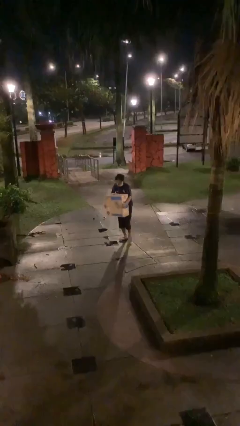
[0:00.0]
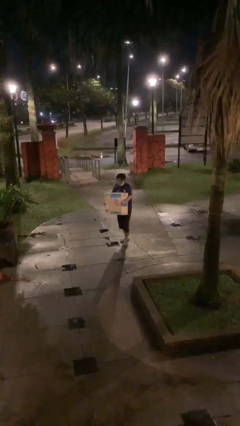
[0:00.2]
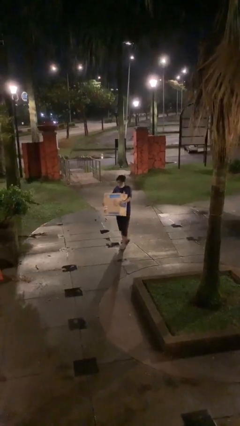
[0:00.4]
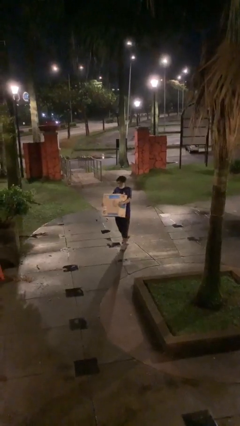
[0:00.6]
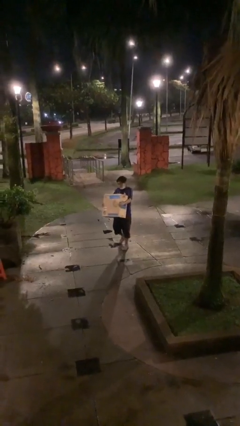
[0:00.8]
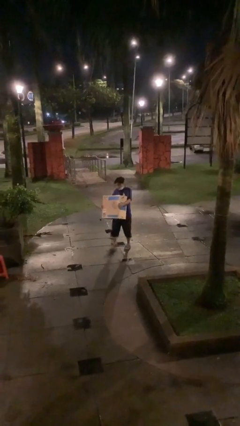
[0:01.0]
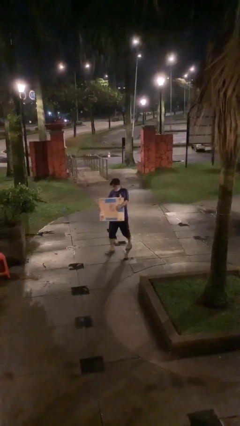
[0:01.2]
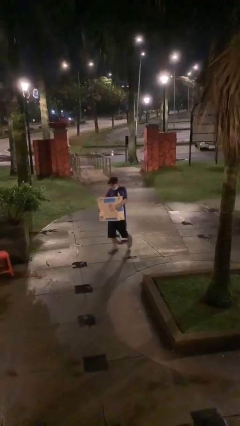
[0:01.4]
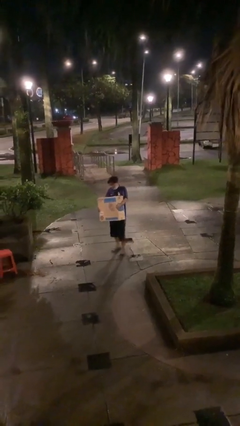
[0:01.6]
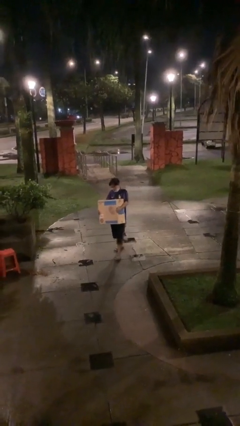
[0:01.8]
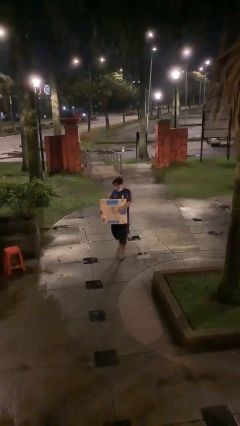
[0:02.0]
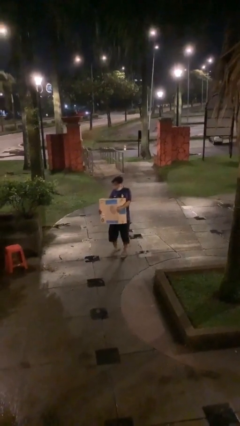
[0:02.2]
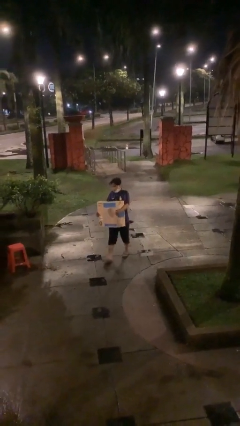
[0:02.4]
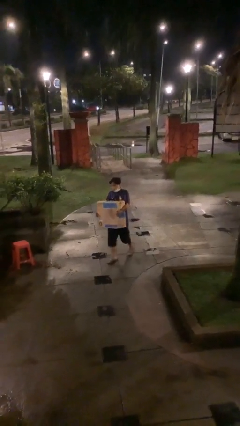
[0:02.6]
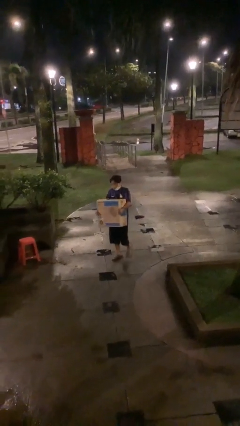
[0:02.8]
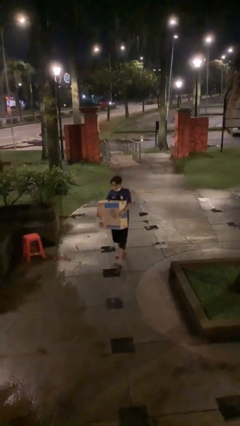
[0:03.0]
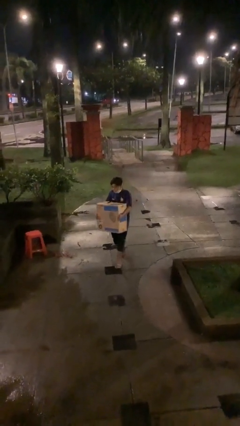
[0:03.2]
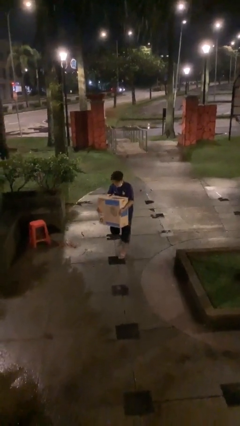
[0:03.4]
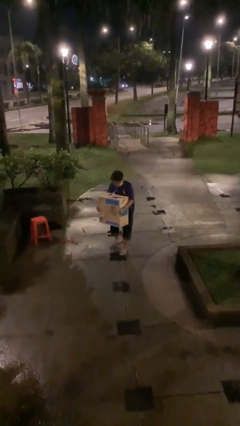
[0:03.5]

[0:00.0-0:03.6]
person carries heavy object

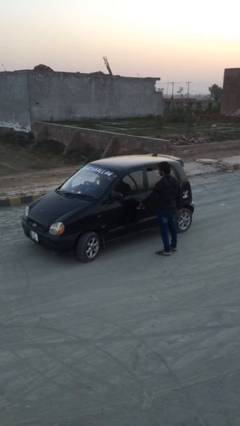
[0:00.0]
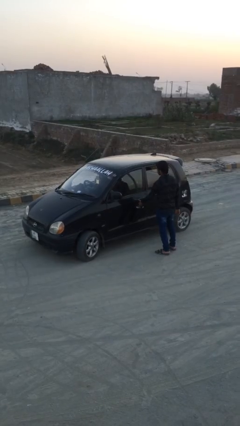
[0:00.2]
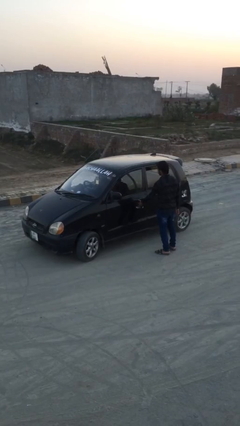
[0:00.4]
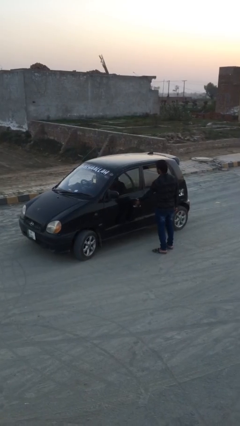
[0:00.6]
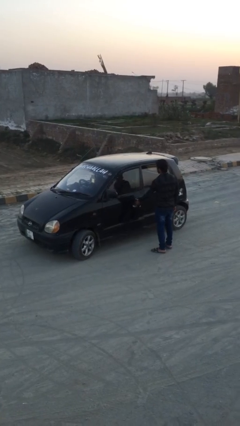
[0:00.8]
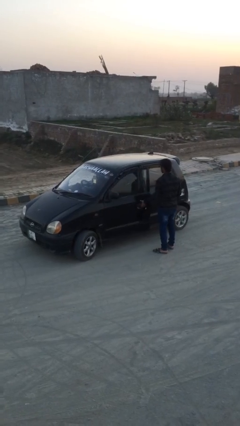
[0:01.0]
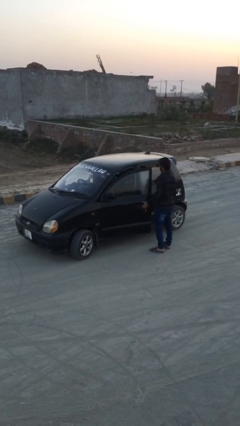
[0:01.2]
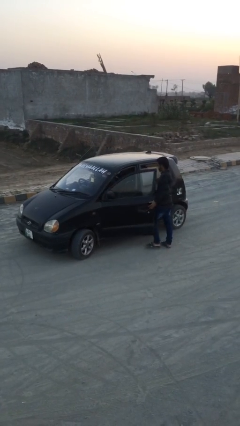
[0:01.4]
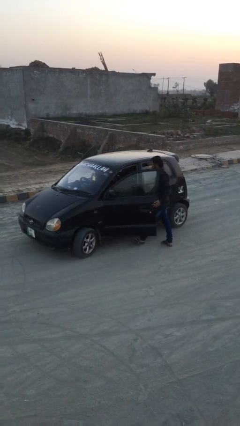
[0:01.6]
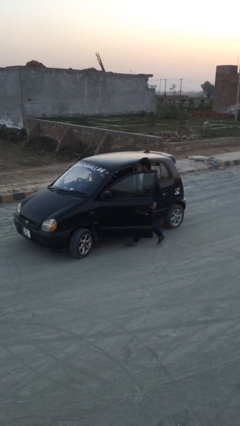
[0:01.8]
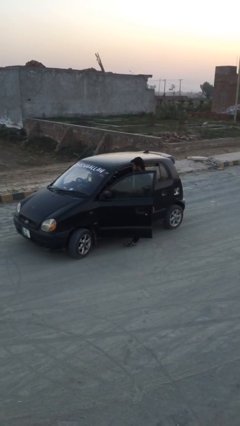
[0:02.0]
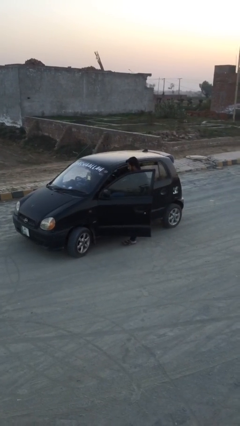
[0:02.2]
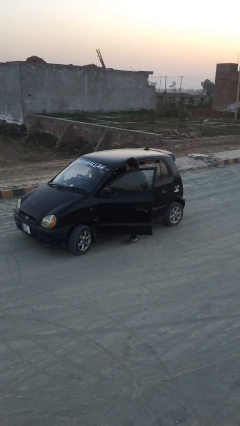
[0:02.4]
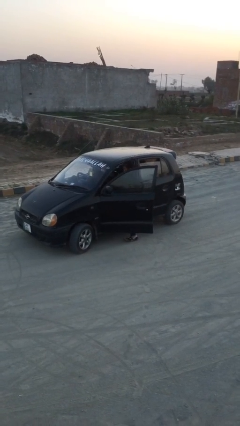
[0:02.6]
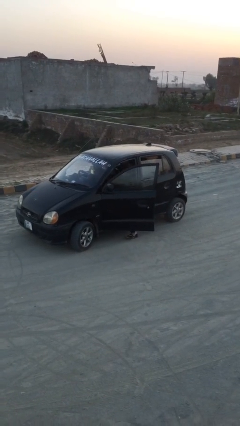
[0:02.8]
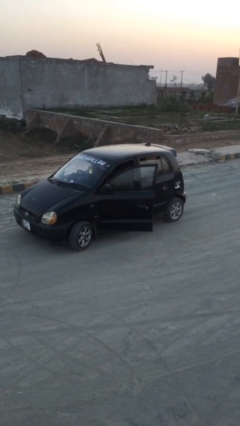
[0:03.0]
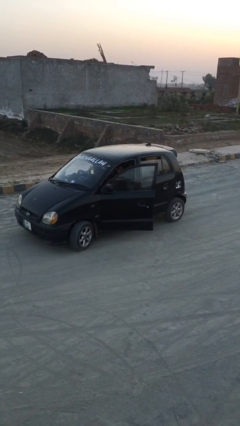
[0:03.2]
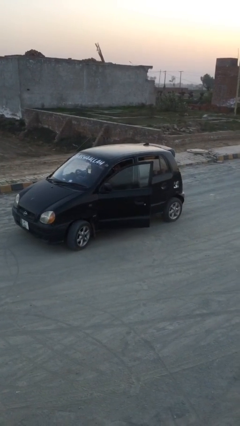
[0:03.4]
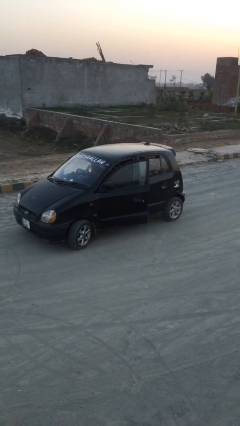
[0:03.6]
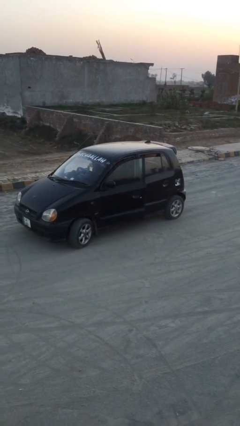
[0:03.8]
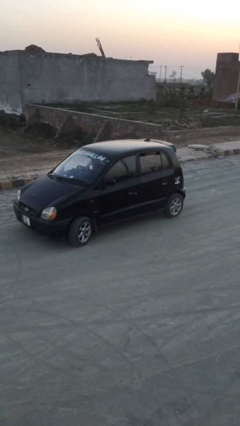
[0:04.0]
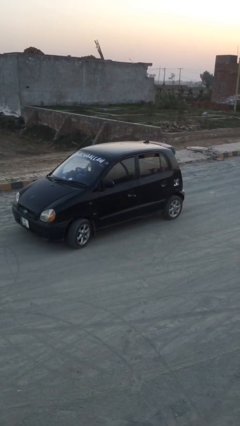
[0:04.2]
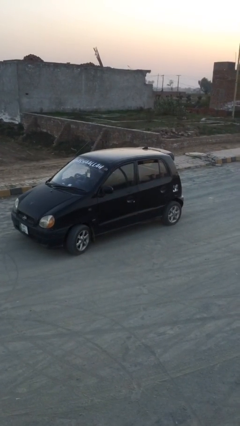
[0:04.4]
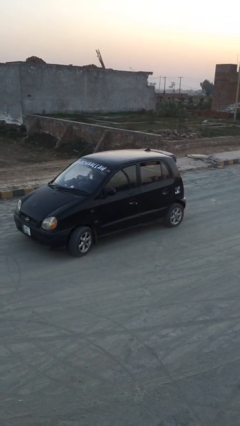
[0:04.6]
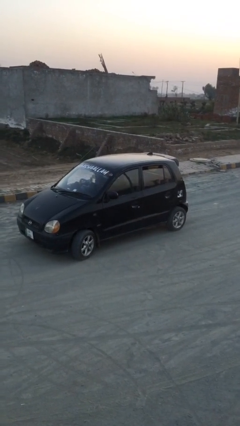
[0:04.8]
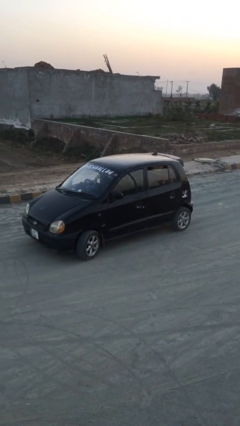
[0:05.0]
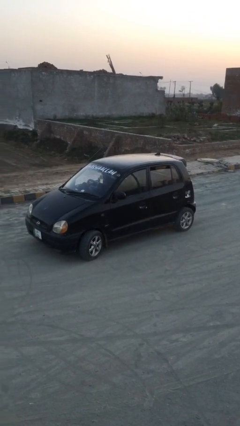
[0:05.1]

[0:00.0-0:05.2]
car picks up person

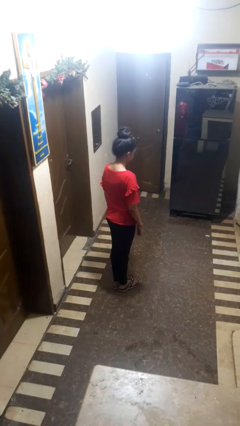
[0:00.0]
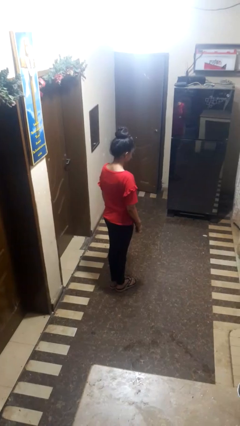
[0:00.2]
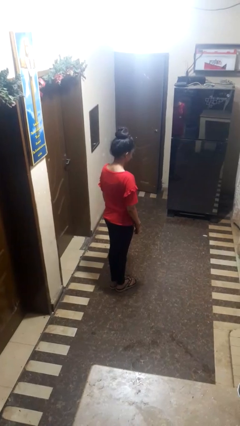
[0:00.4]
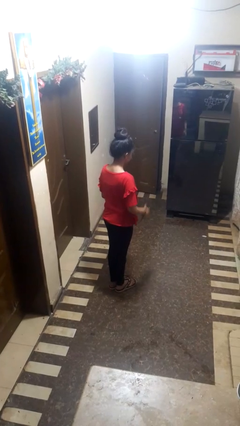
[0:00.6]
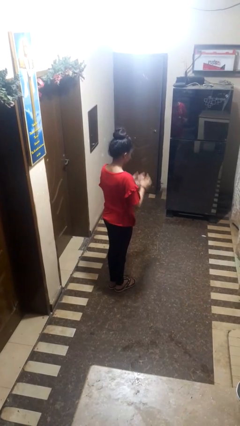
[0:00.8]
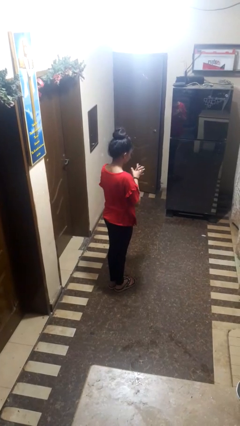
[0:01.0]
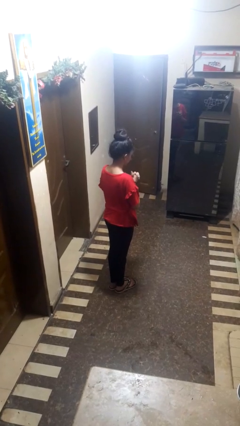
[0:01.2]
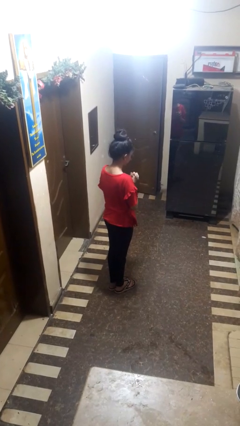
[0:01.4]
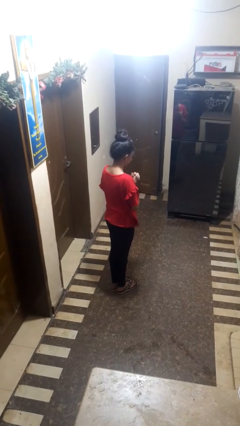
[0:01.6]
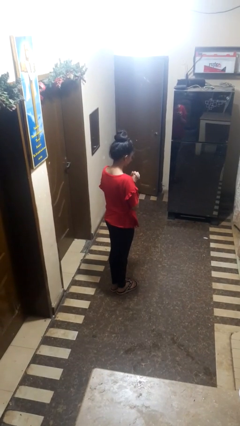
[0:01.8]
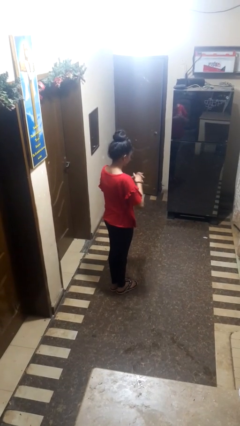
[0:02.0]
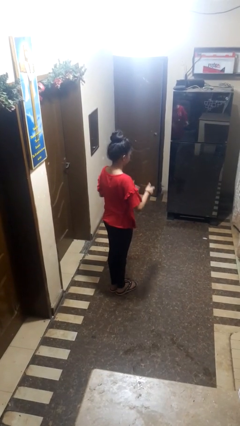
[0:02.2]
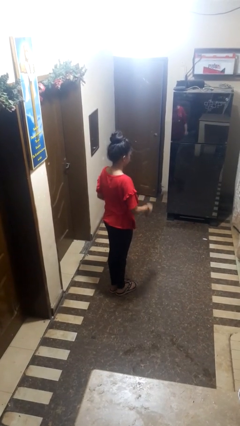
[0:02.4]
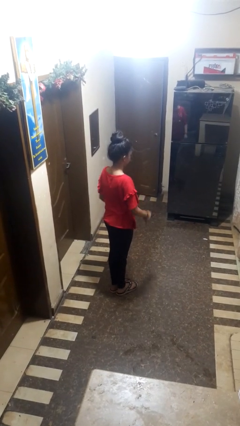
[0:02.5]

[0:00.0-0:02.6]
person prays

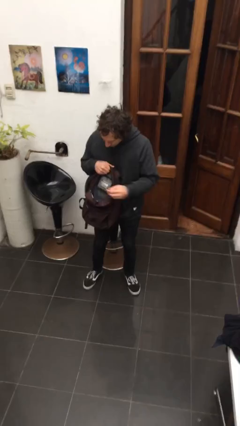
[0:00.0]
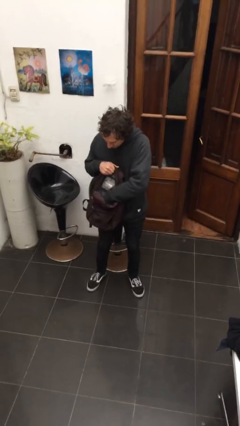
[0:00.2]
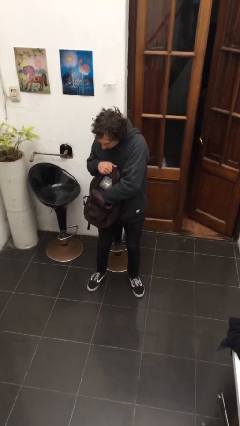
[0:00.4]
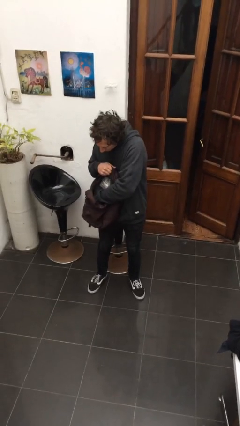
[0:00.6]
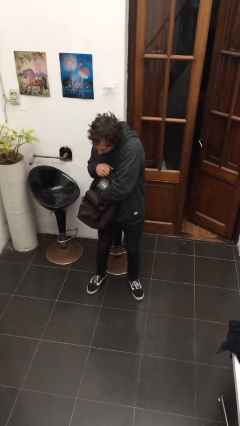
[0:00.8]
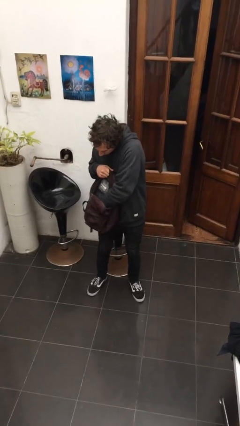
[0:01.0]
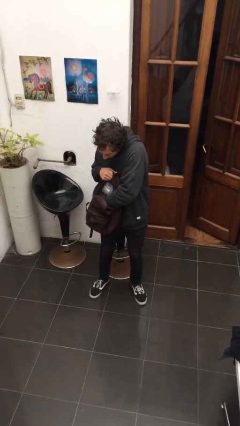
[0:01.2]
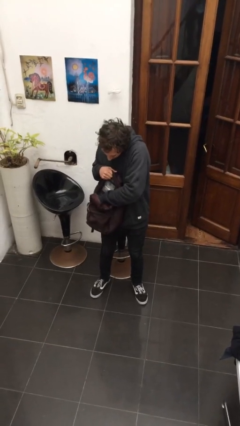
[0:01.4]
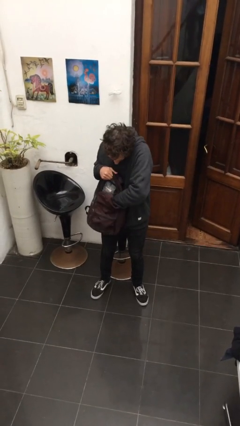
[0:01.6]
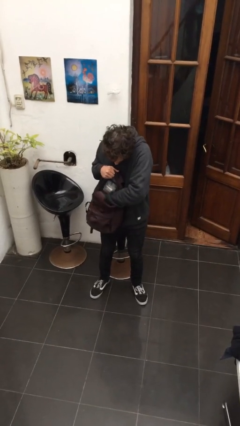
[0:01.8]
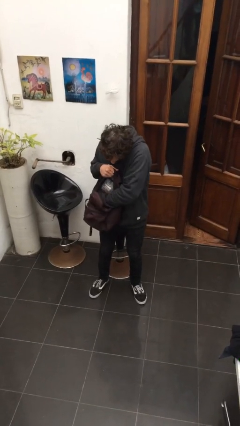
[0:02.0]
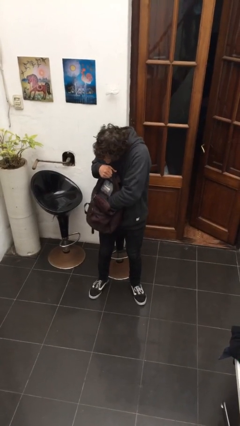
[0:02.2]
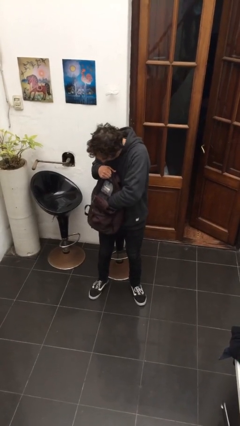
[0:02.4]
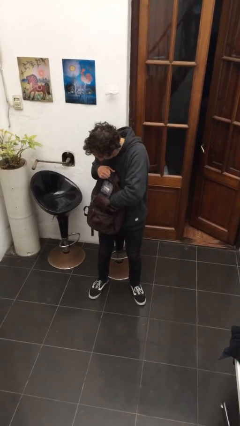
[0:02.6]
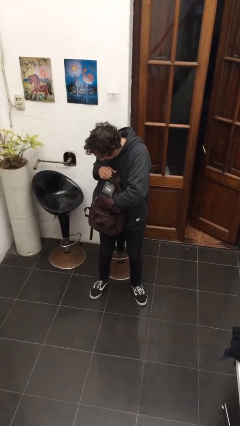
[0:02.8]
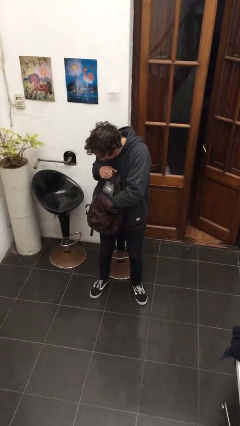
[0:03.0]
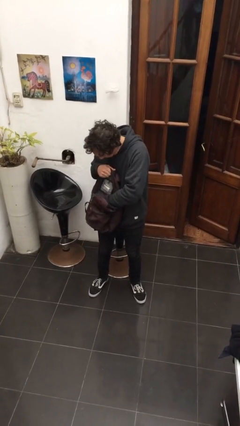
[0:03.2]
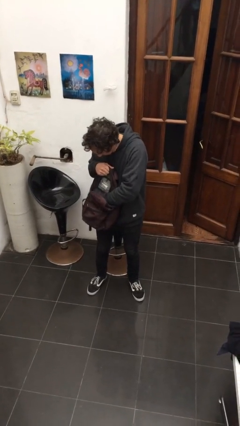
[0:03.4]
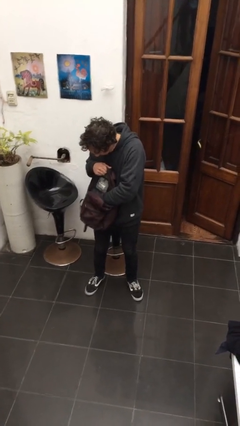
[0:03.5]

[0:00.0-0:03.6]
person searches in backpack

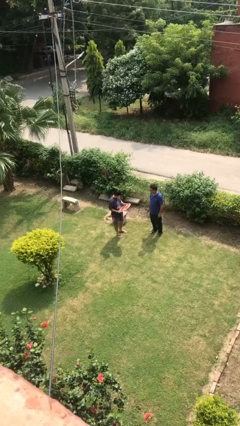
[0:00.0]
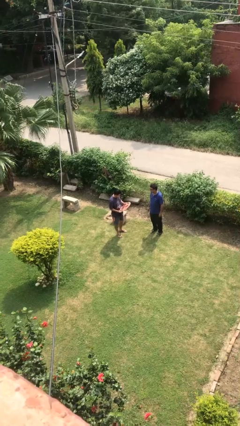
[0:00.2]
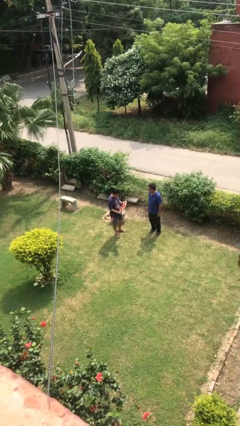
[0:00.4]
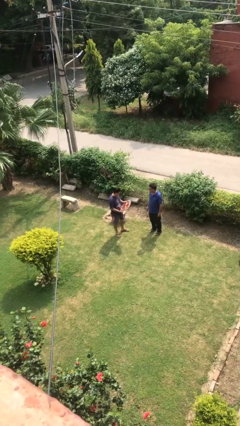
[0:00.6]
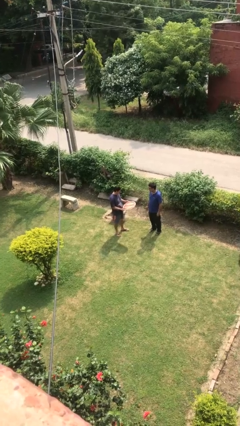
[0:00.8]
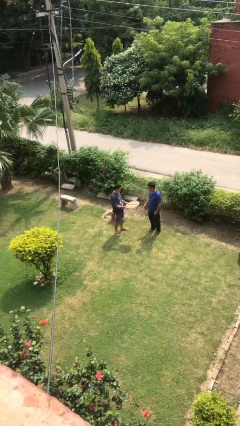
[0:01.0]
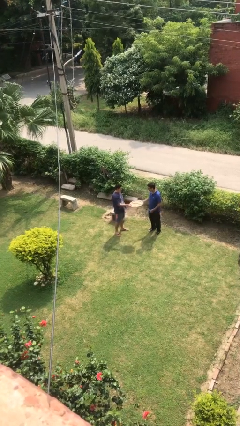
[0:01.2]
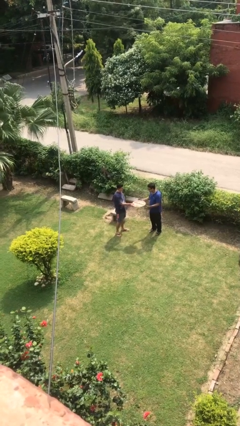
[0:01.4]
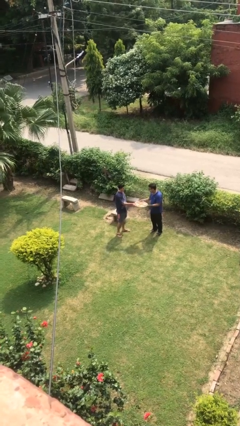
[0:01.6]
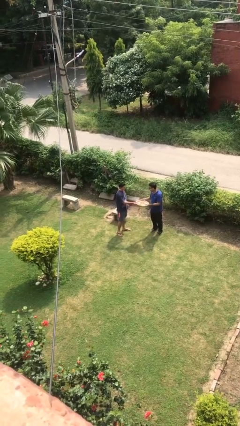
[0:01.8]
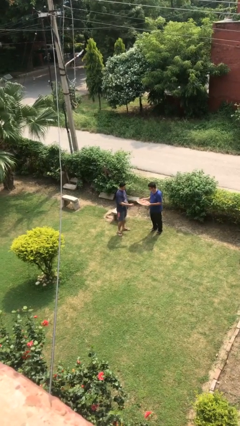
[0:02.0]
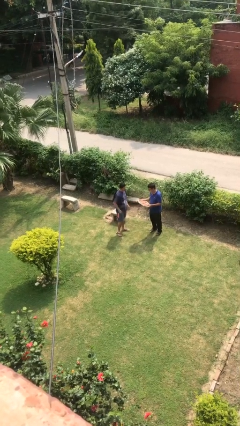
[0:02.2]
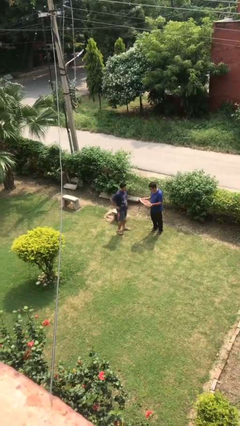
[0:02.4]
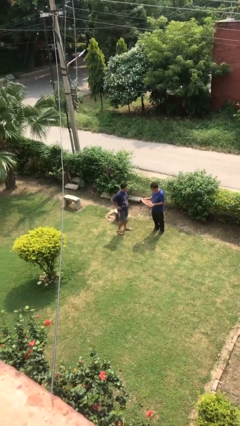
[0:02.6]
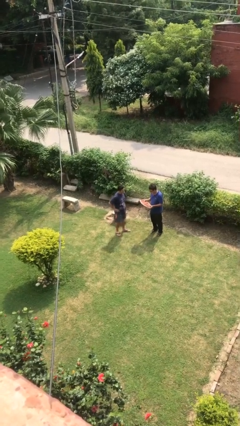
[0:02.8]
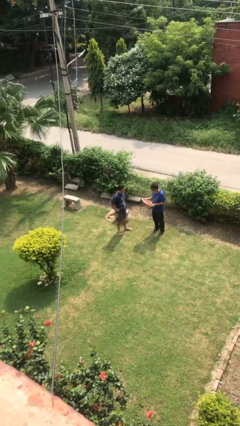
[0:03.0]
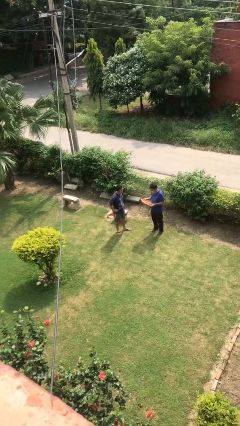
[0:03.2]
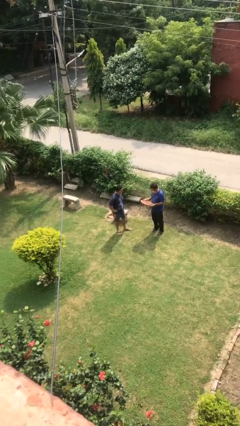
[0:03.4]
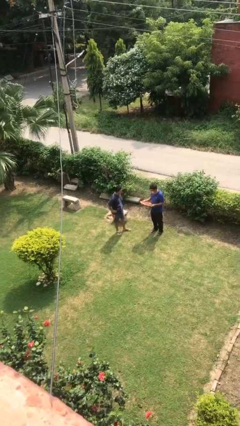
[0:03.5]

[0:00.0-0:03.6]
person transfers object to person
